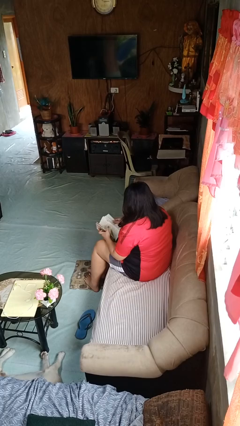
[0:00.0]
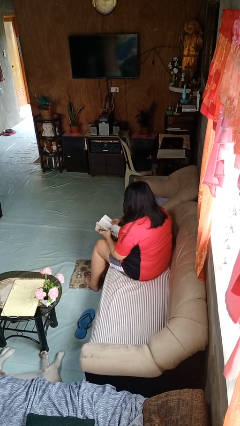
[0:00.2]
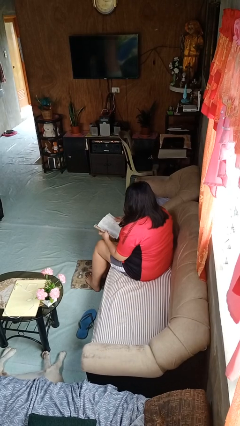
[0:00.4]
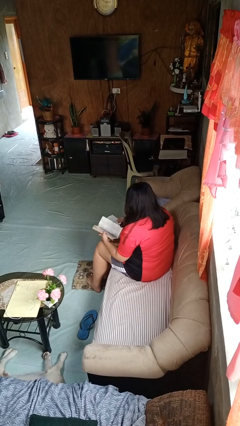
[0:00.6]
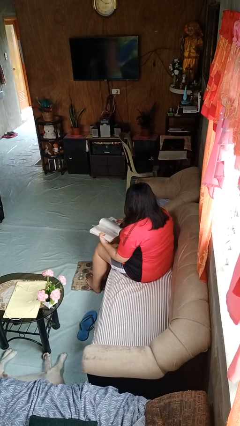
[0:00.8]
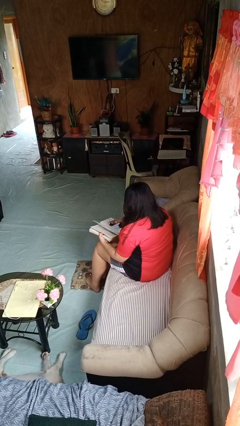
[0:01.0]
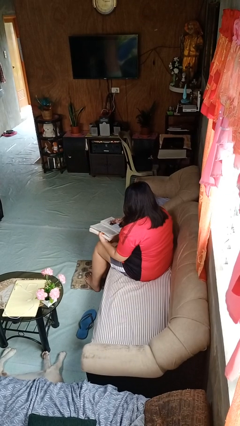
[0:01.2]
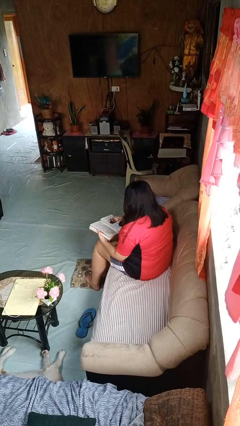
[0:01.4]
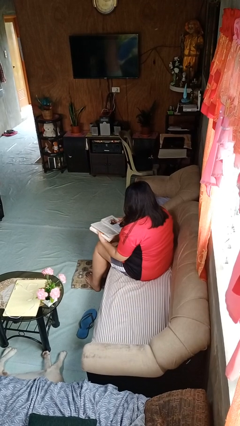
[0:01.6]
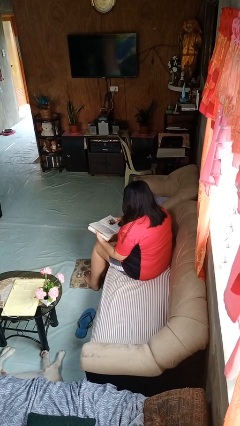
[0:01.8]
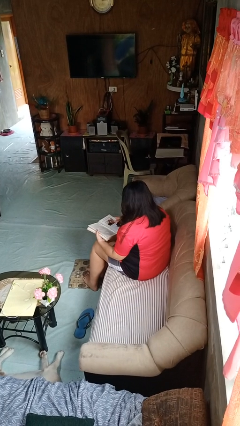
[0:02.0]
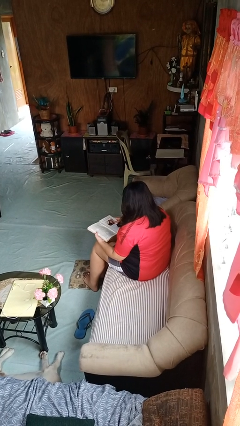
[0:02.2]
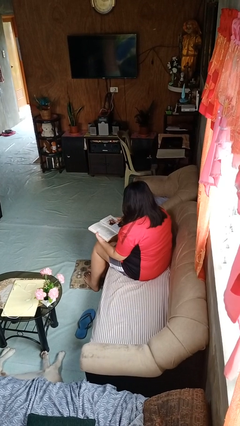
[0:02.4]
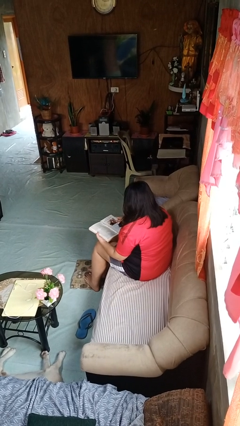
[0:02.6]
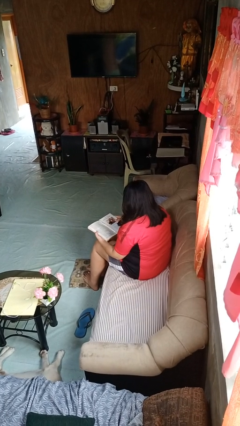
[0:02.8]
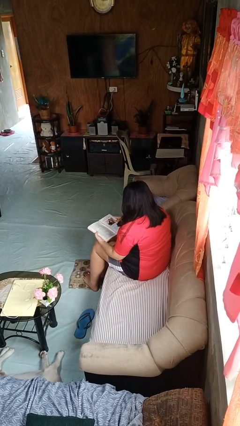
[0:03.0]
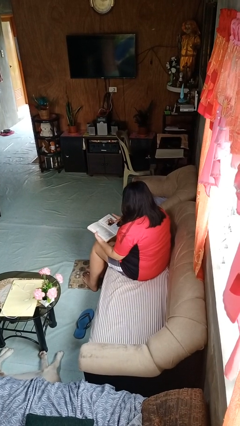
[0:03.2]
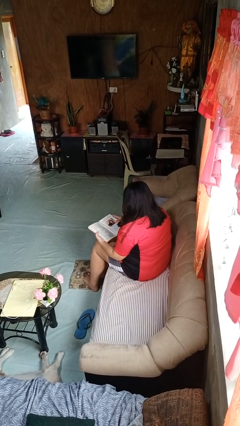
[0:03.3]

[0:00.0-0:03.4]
person reads book

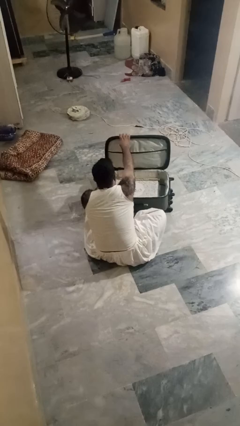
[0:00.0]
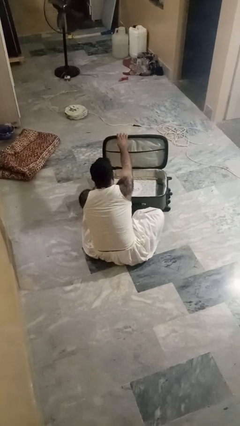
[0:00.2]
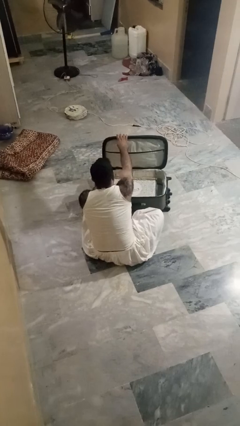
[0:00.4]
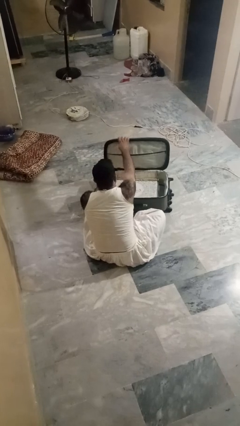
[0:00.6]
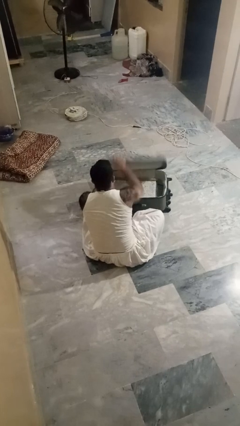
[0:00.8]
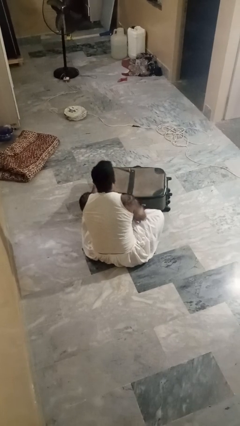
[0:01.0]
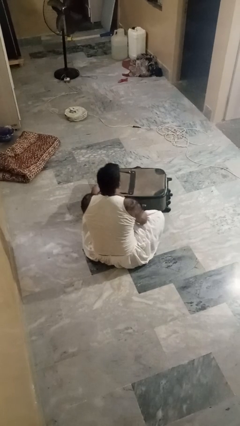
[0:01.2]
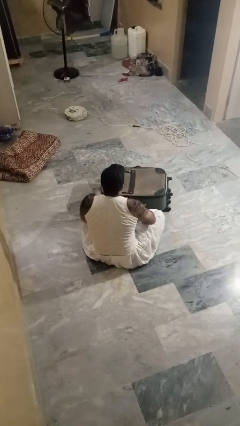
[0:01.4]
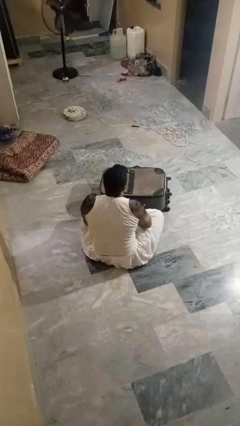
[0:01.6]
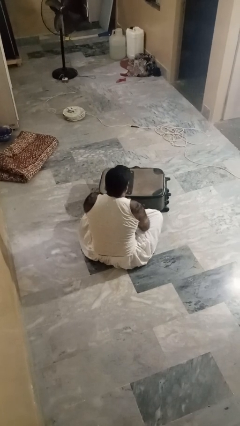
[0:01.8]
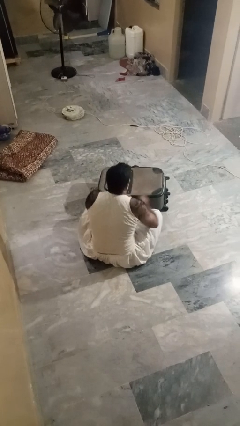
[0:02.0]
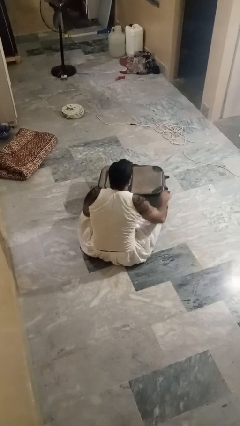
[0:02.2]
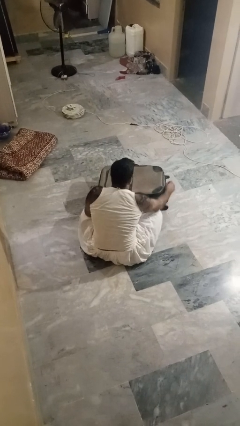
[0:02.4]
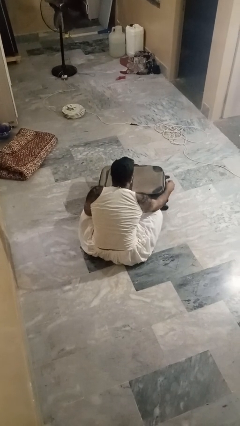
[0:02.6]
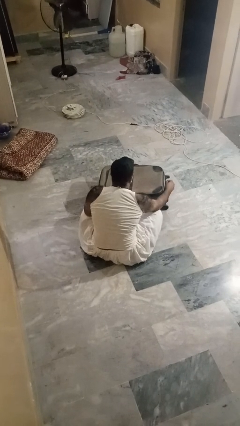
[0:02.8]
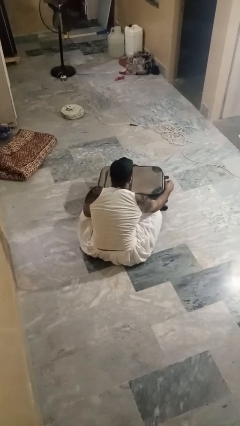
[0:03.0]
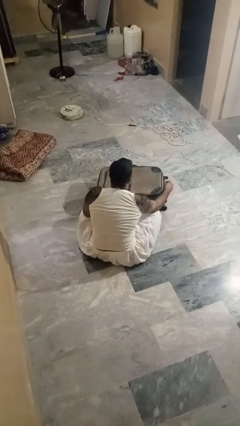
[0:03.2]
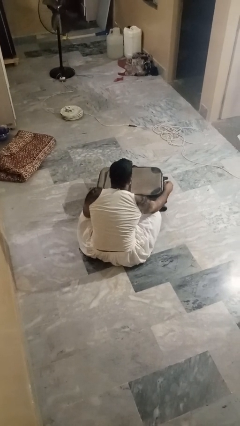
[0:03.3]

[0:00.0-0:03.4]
person closes suitcase

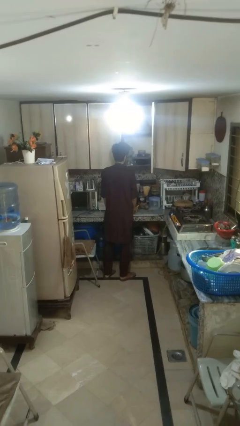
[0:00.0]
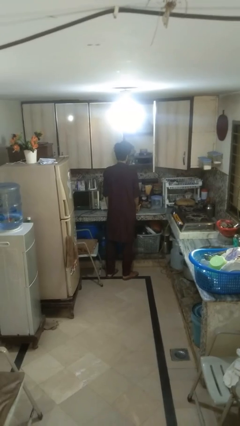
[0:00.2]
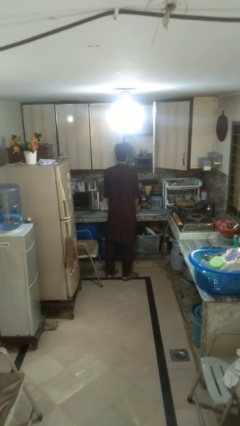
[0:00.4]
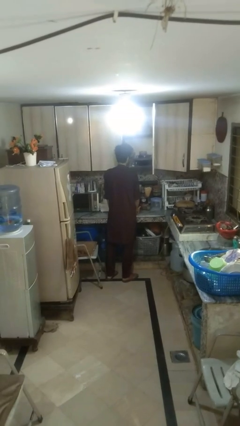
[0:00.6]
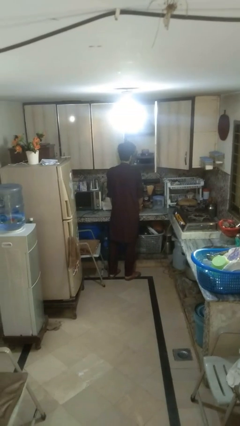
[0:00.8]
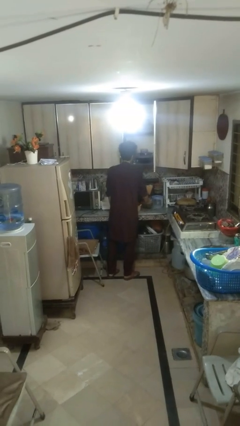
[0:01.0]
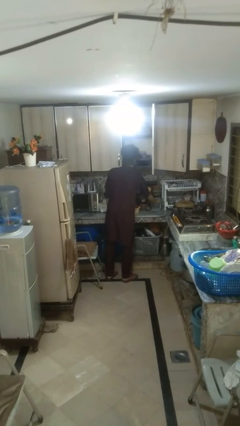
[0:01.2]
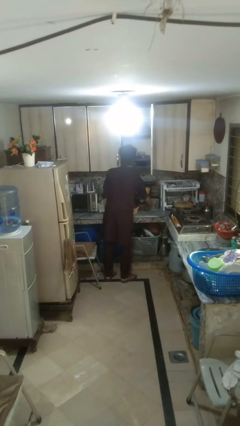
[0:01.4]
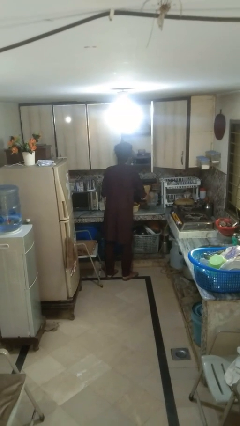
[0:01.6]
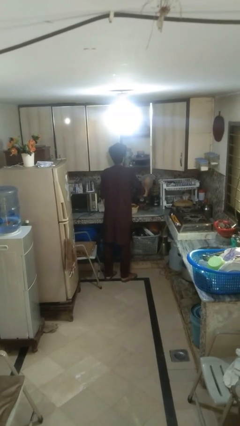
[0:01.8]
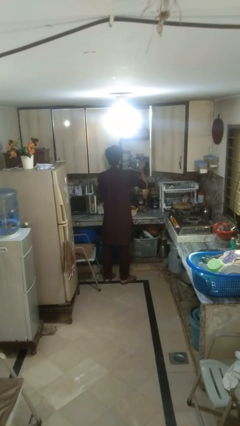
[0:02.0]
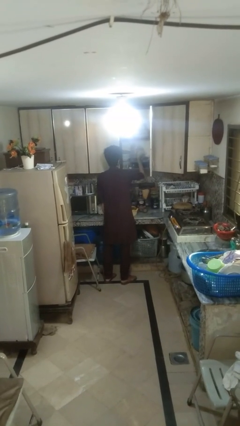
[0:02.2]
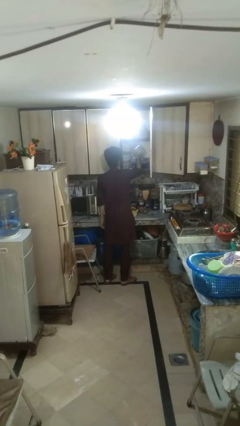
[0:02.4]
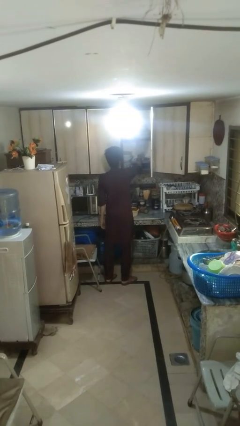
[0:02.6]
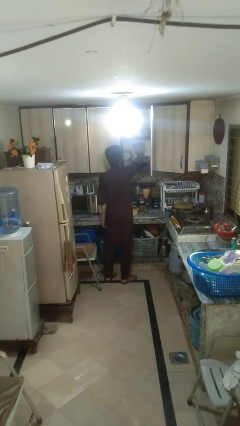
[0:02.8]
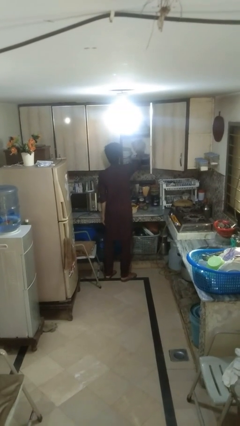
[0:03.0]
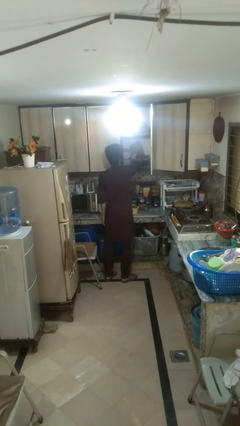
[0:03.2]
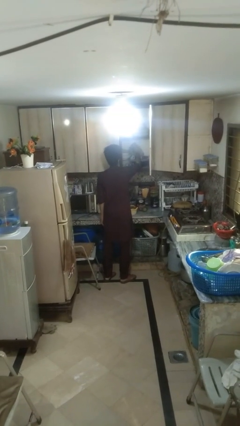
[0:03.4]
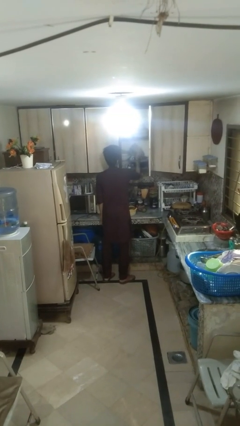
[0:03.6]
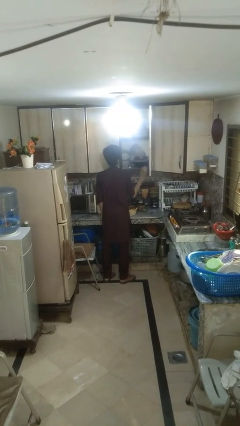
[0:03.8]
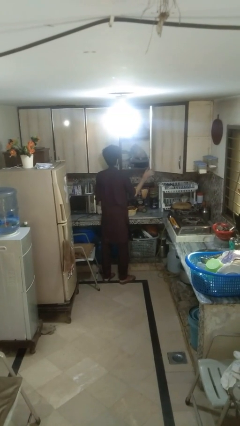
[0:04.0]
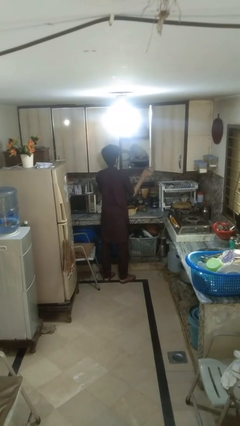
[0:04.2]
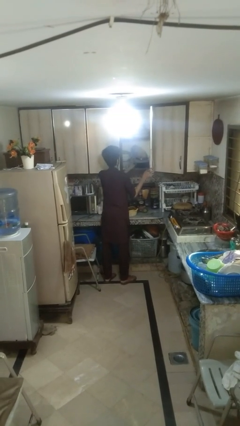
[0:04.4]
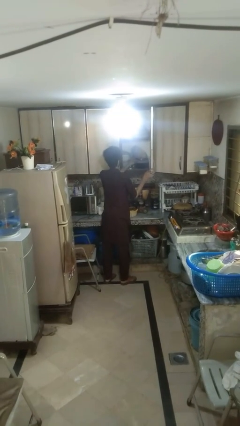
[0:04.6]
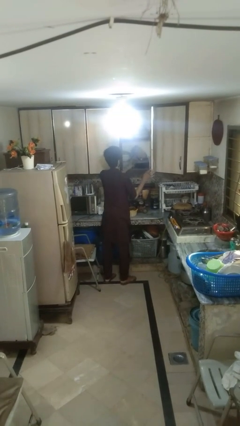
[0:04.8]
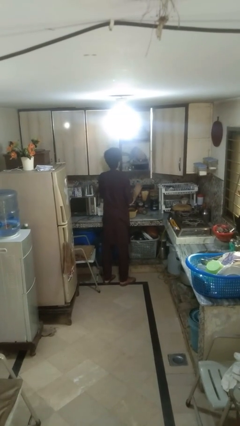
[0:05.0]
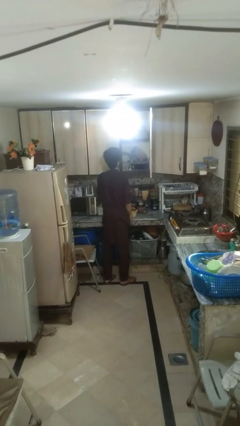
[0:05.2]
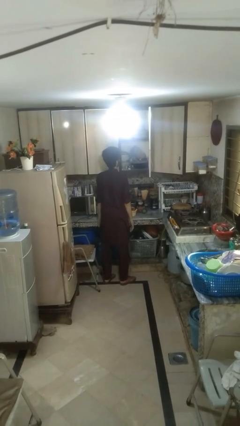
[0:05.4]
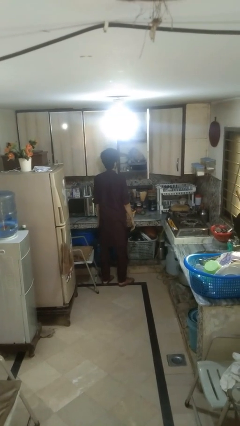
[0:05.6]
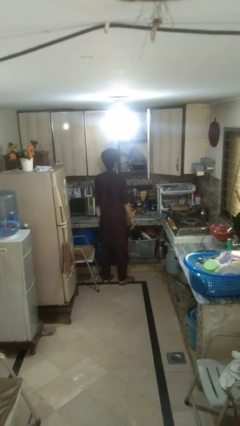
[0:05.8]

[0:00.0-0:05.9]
person puts object in cabinet

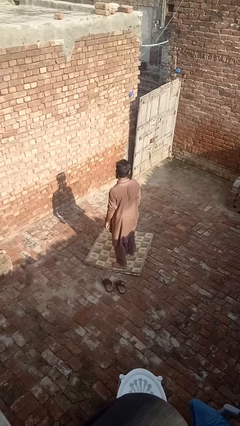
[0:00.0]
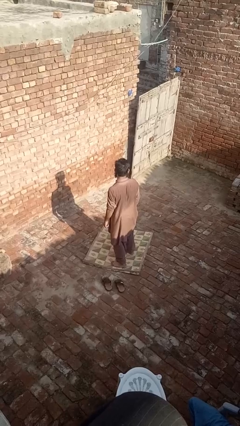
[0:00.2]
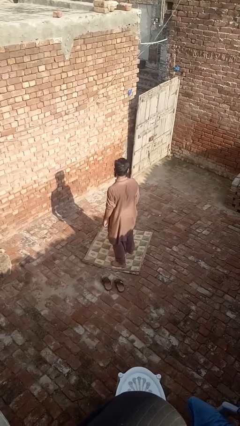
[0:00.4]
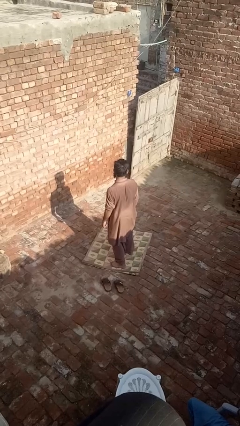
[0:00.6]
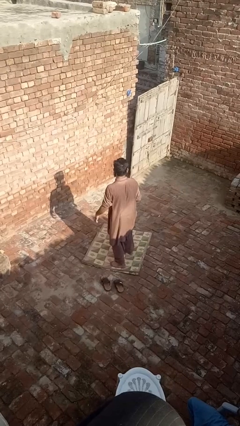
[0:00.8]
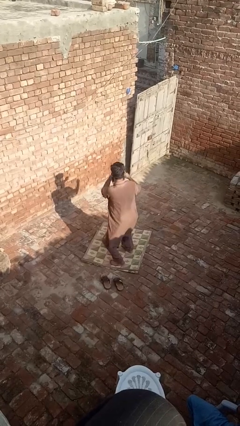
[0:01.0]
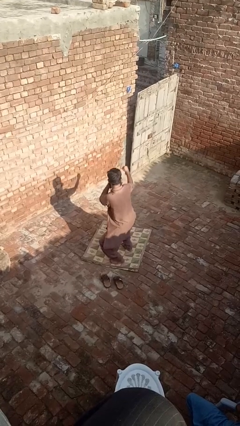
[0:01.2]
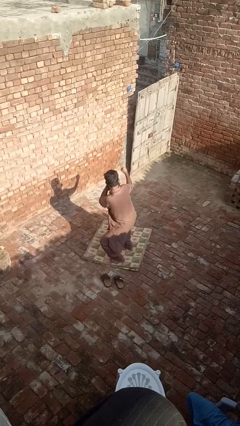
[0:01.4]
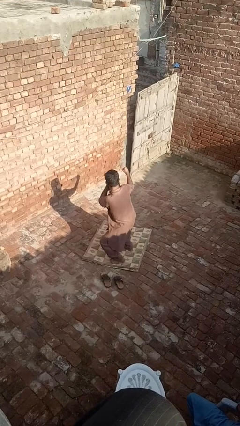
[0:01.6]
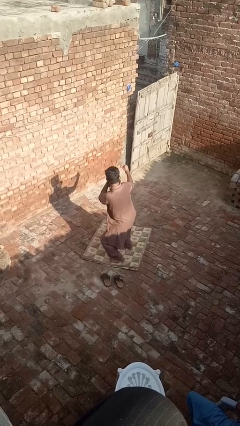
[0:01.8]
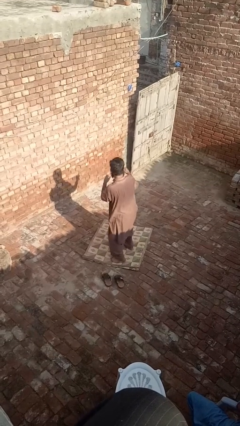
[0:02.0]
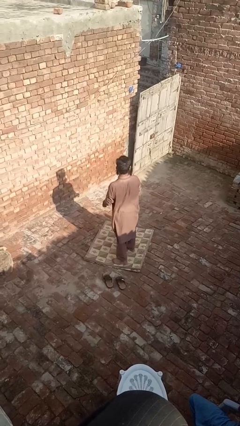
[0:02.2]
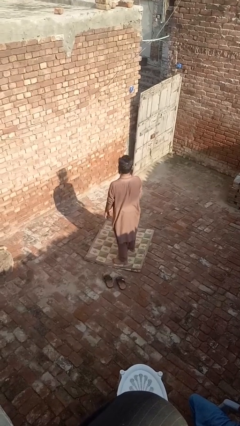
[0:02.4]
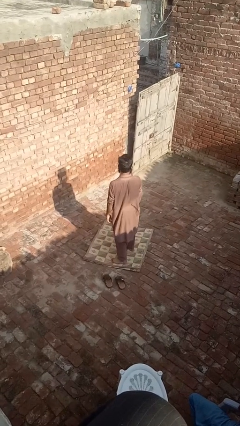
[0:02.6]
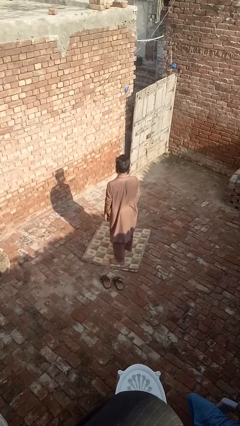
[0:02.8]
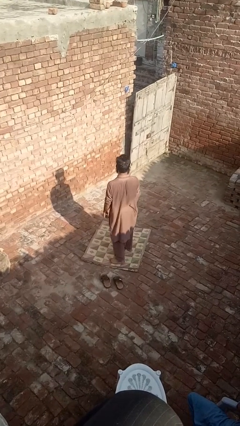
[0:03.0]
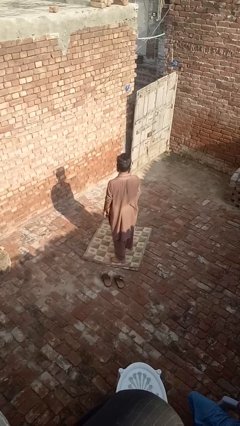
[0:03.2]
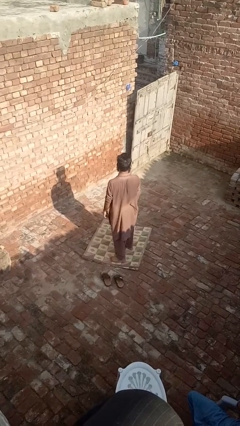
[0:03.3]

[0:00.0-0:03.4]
person karate chop

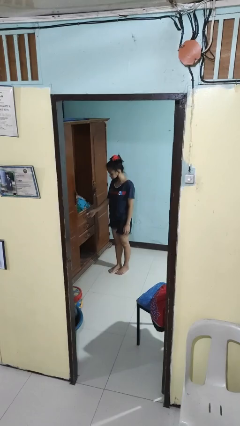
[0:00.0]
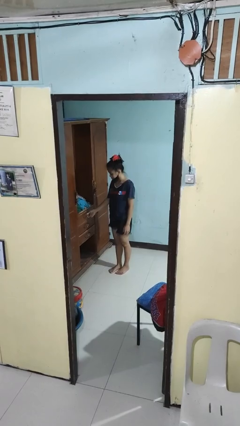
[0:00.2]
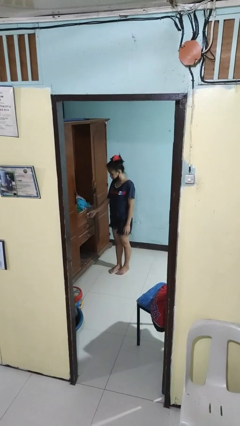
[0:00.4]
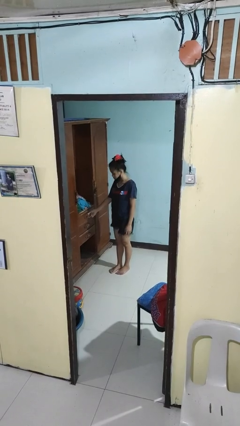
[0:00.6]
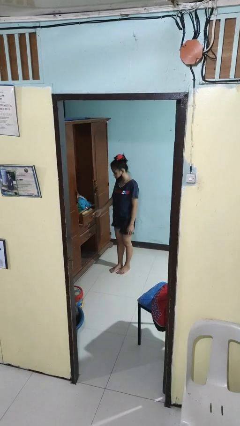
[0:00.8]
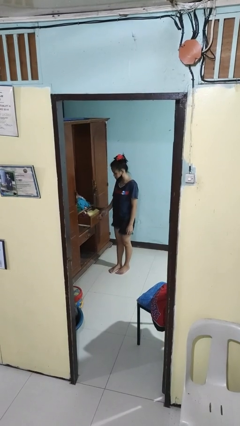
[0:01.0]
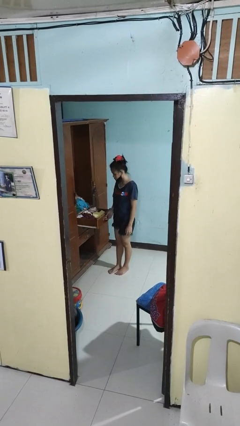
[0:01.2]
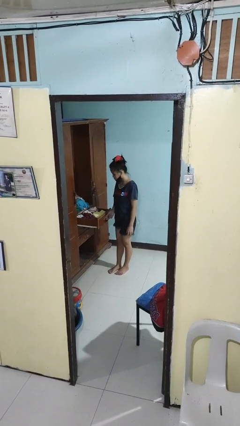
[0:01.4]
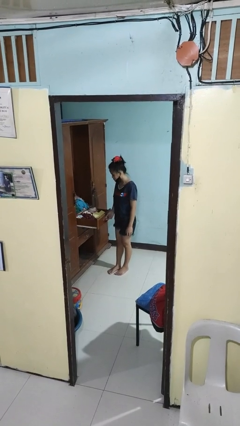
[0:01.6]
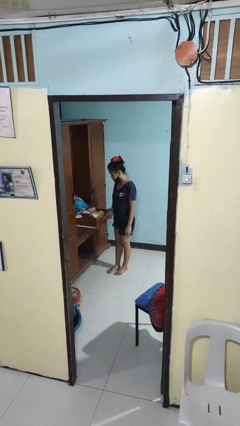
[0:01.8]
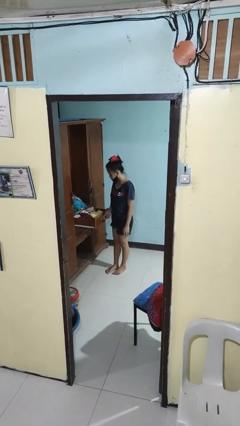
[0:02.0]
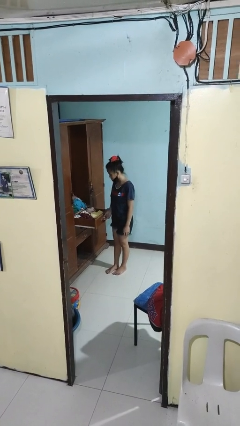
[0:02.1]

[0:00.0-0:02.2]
person opens dresser drawer
